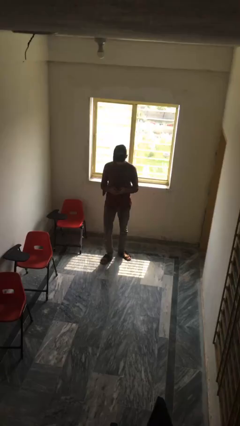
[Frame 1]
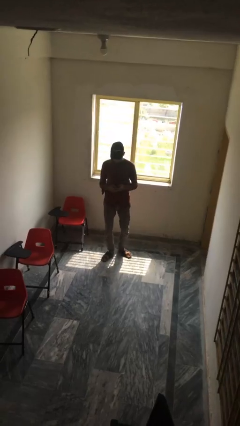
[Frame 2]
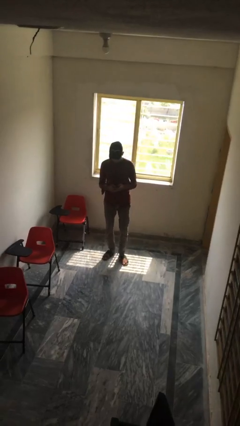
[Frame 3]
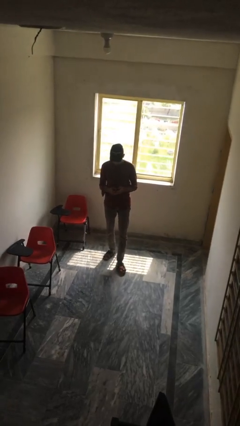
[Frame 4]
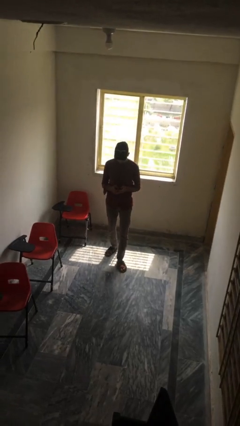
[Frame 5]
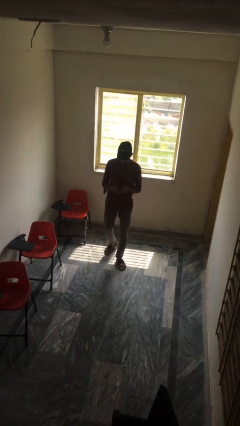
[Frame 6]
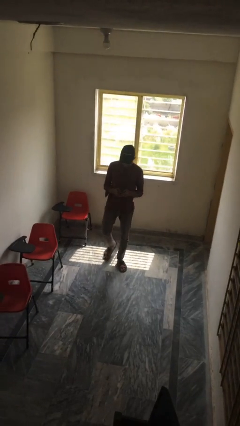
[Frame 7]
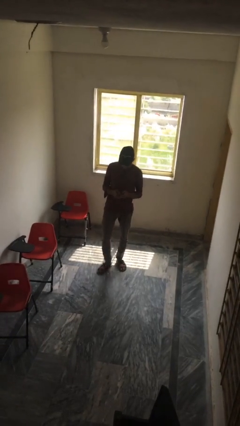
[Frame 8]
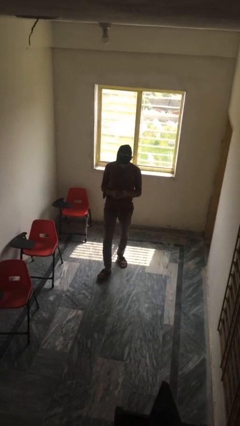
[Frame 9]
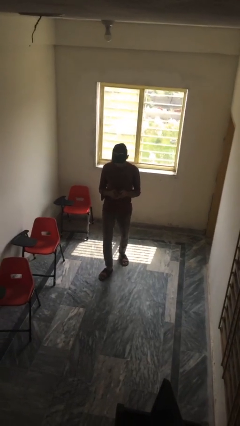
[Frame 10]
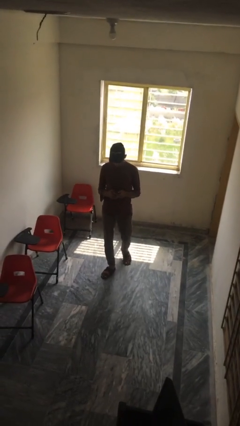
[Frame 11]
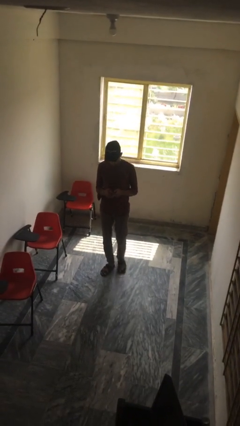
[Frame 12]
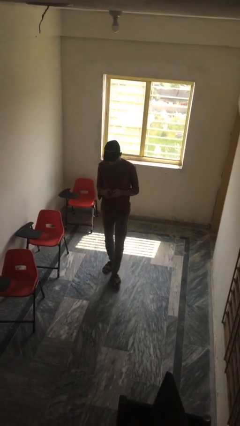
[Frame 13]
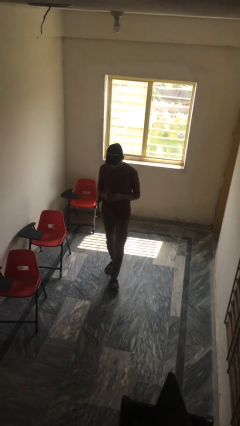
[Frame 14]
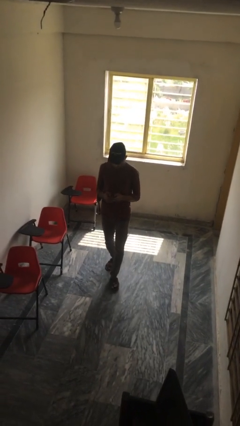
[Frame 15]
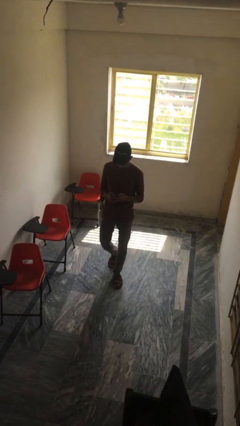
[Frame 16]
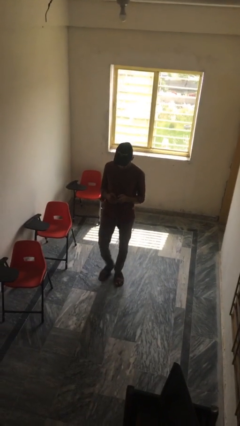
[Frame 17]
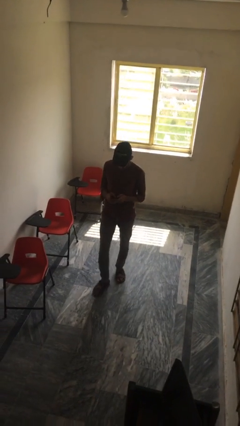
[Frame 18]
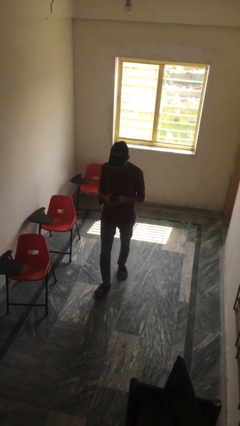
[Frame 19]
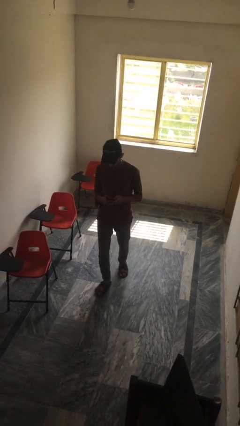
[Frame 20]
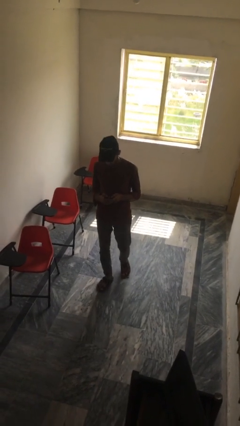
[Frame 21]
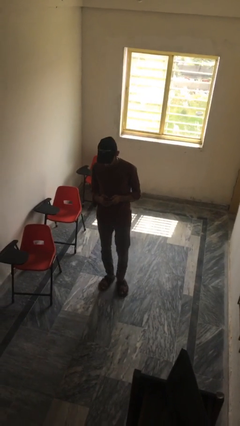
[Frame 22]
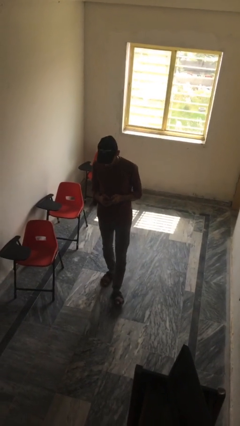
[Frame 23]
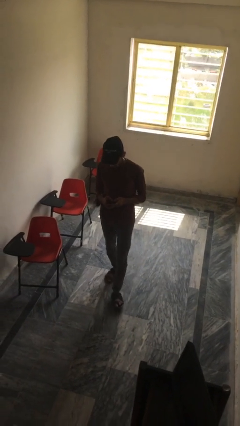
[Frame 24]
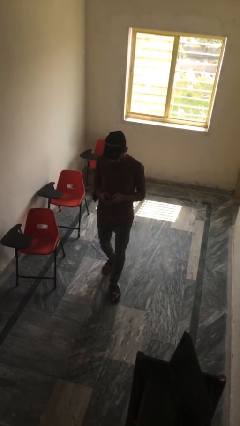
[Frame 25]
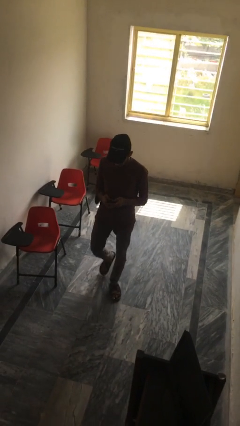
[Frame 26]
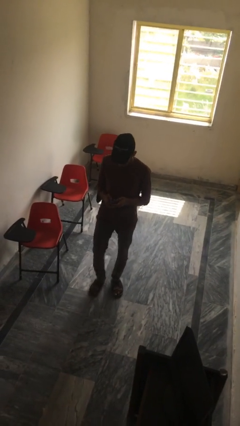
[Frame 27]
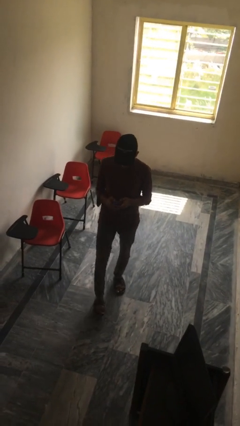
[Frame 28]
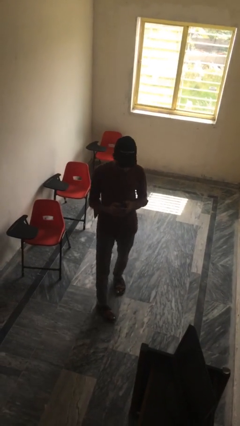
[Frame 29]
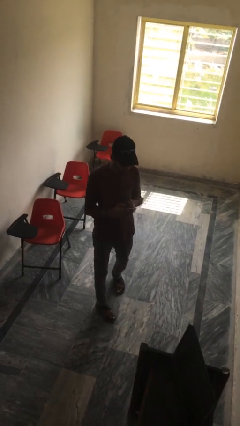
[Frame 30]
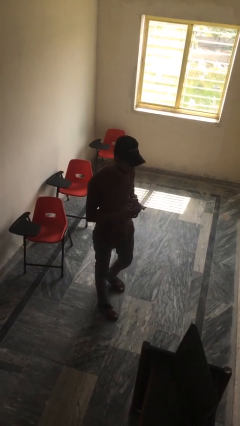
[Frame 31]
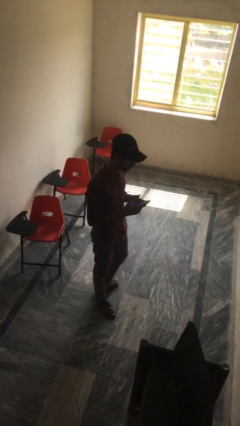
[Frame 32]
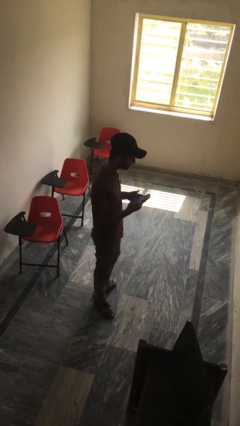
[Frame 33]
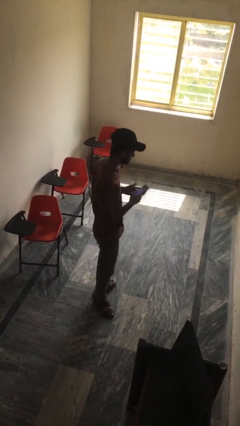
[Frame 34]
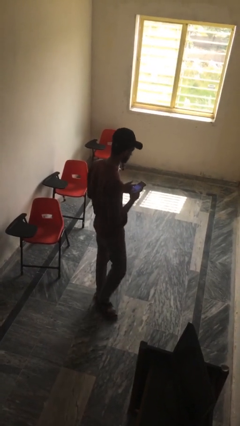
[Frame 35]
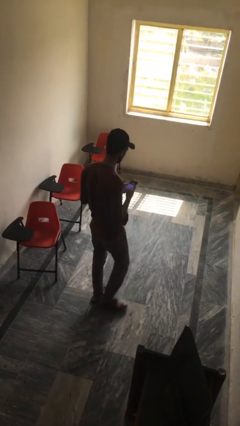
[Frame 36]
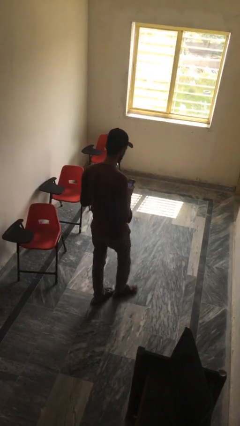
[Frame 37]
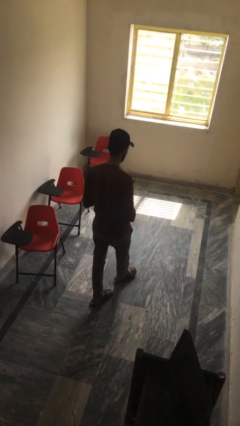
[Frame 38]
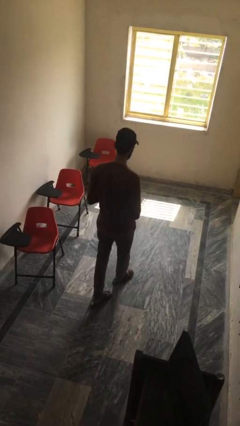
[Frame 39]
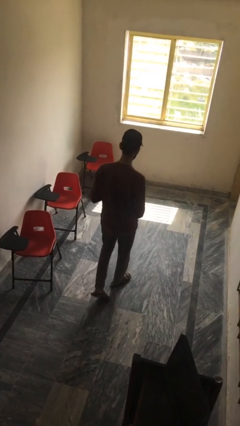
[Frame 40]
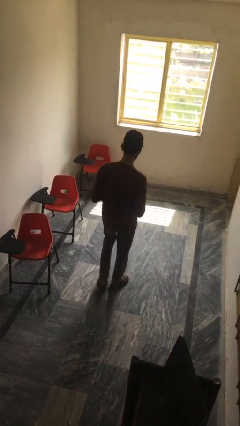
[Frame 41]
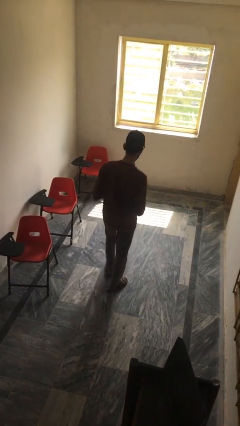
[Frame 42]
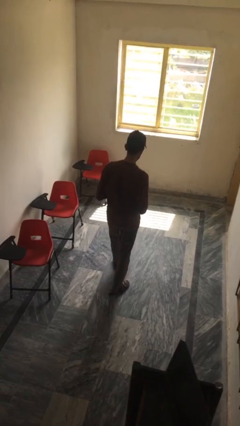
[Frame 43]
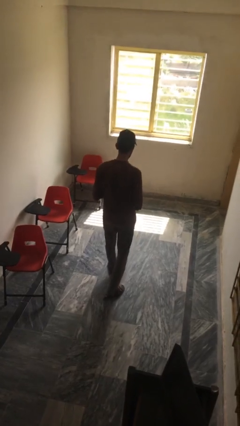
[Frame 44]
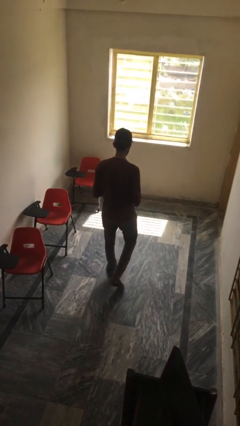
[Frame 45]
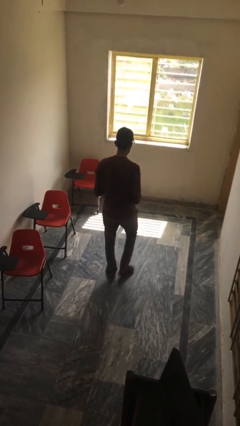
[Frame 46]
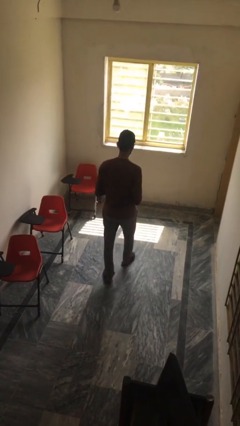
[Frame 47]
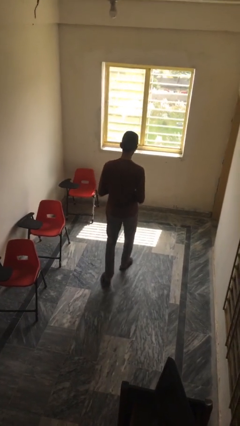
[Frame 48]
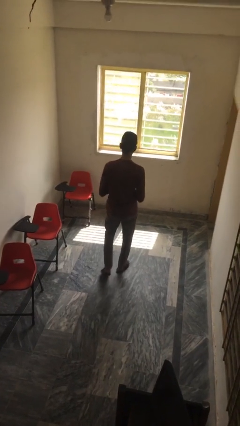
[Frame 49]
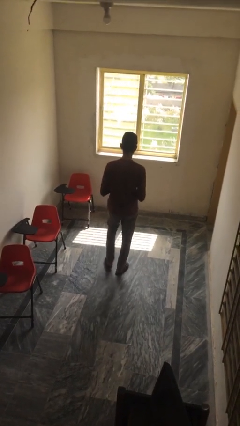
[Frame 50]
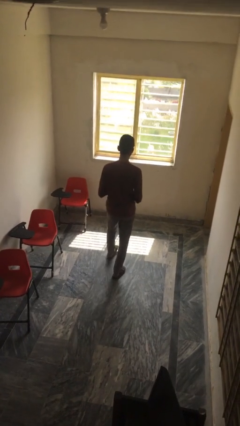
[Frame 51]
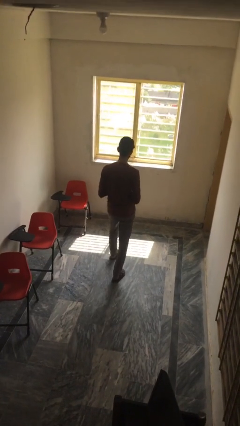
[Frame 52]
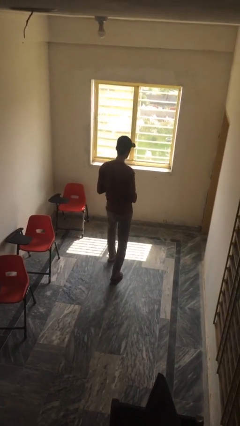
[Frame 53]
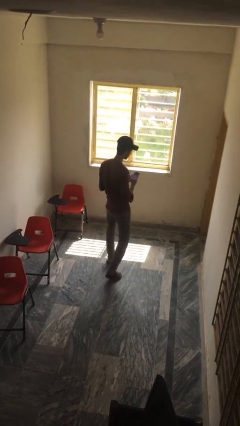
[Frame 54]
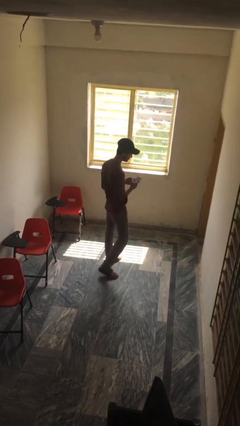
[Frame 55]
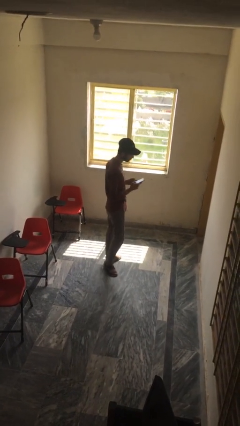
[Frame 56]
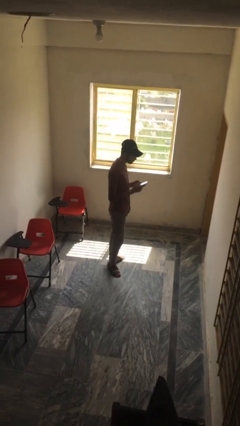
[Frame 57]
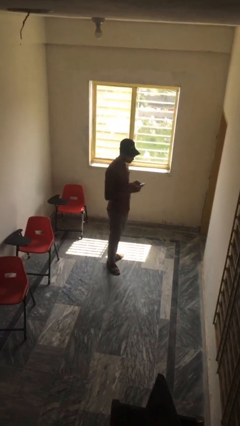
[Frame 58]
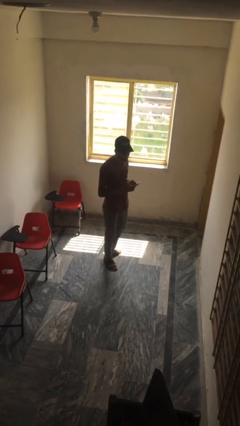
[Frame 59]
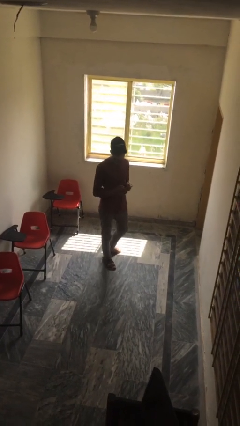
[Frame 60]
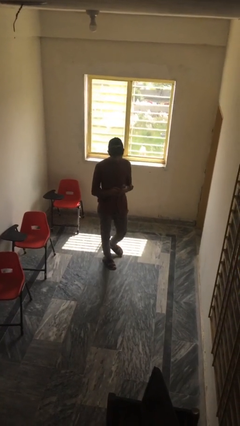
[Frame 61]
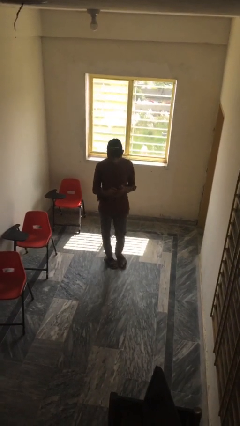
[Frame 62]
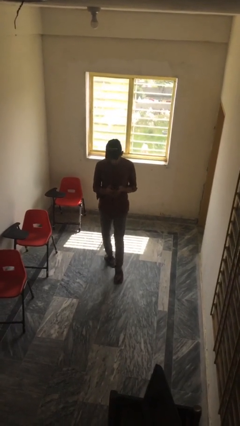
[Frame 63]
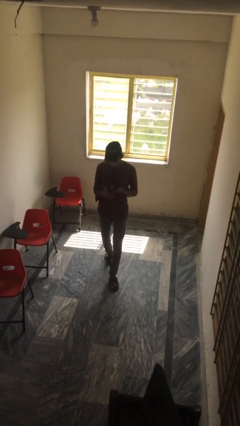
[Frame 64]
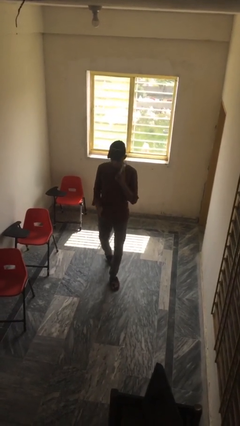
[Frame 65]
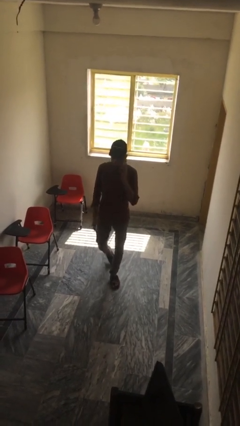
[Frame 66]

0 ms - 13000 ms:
person texts on phone

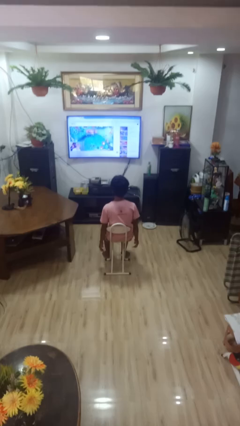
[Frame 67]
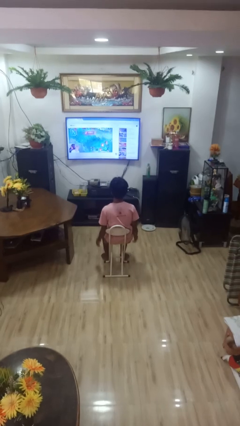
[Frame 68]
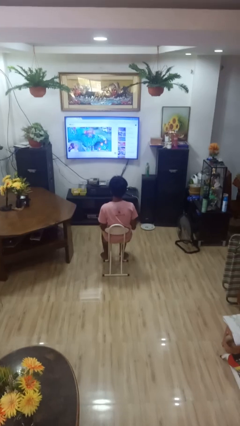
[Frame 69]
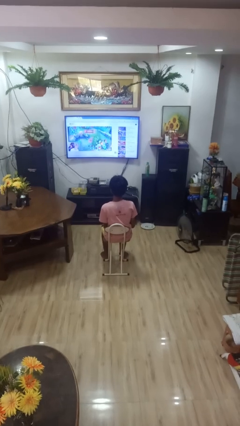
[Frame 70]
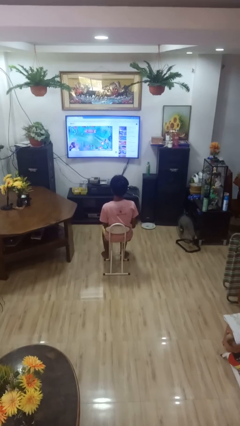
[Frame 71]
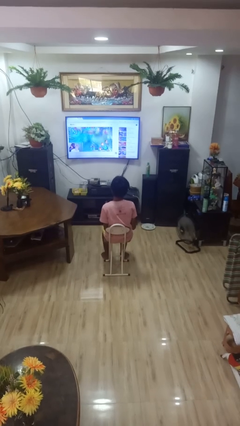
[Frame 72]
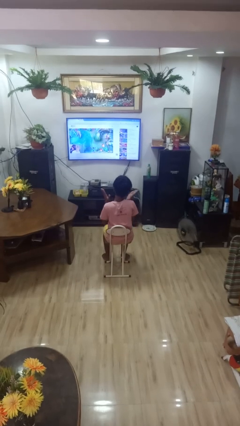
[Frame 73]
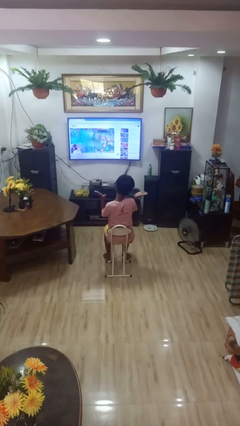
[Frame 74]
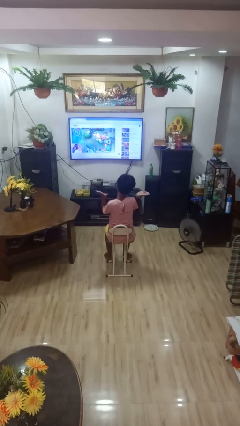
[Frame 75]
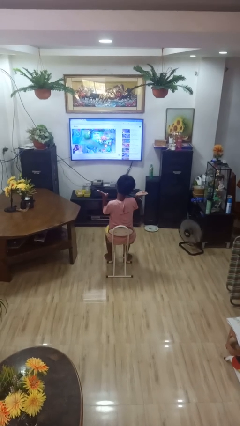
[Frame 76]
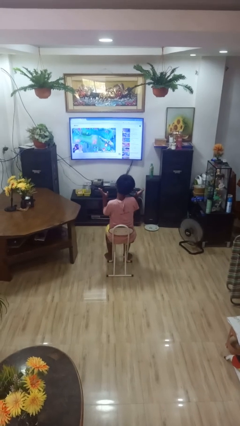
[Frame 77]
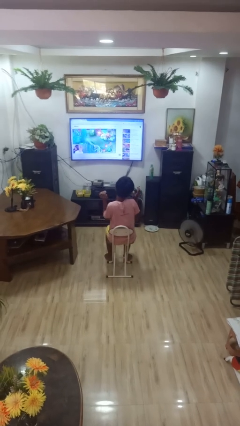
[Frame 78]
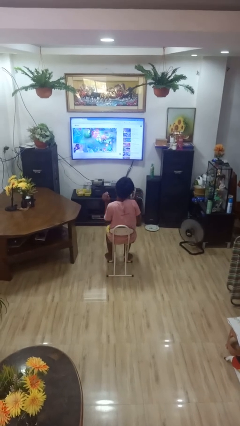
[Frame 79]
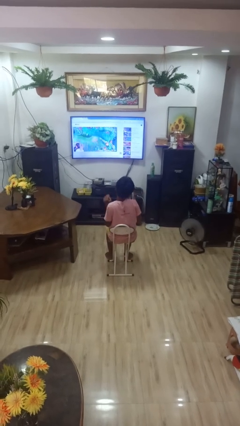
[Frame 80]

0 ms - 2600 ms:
person shrugs

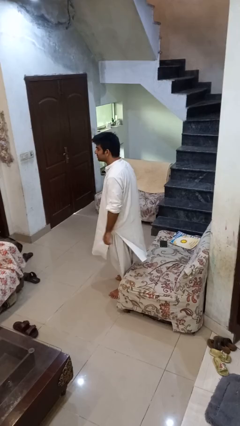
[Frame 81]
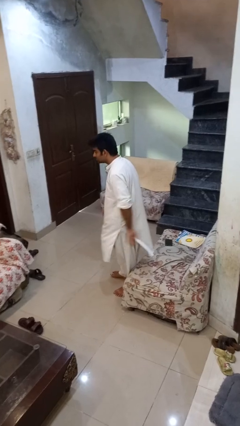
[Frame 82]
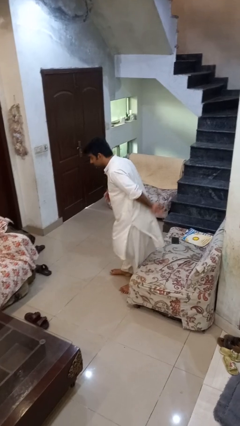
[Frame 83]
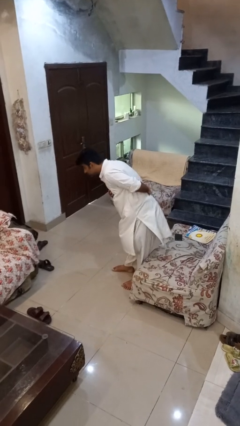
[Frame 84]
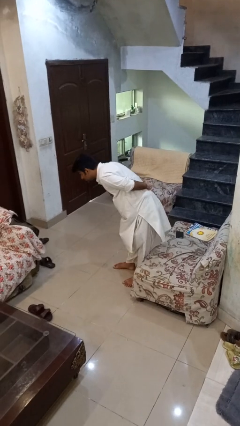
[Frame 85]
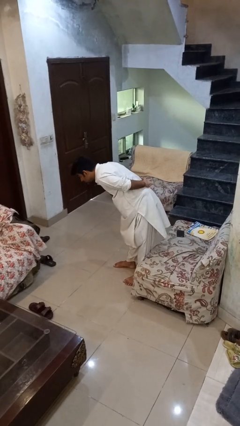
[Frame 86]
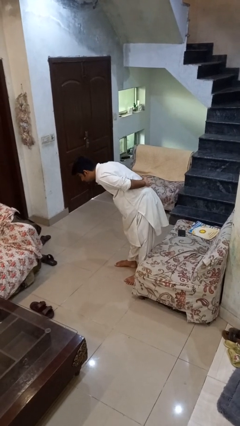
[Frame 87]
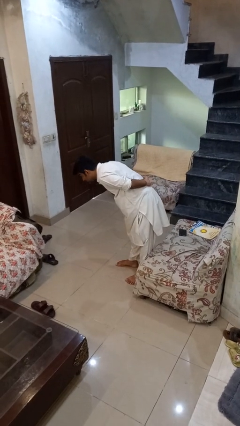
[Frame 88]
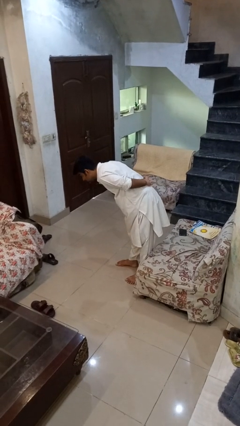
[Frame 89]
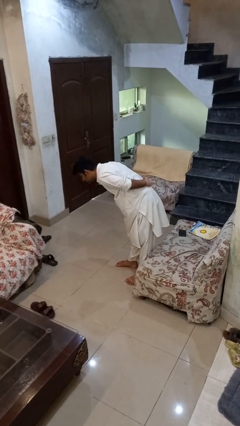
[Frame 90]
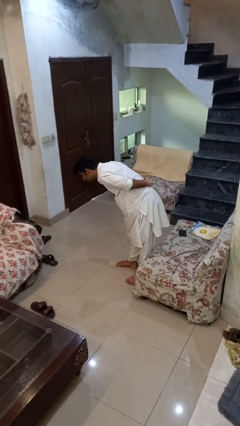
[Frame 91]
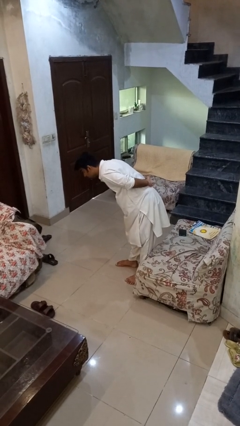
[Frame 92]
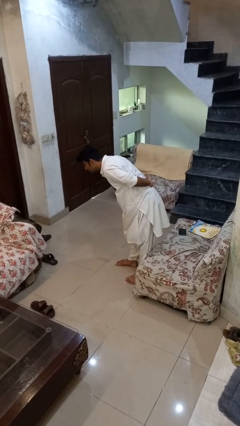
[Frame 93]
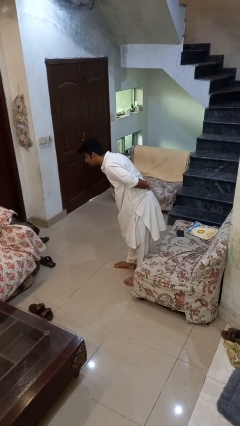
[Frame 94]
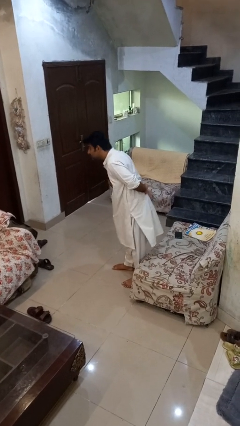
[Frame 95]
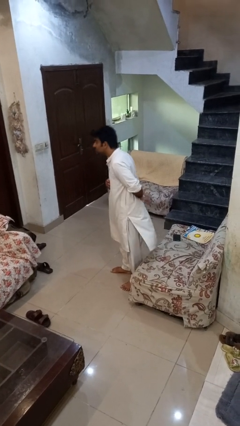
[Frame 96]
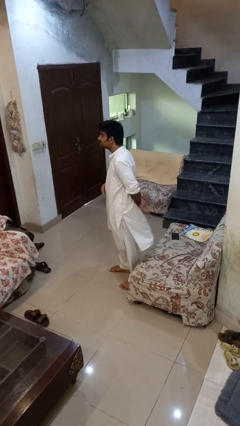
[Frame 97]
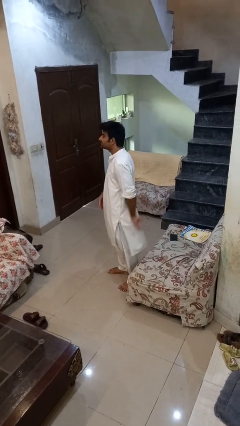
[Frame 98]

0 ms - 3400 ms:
person bows
